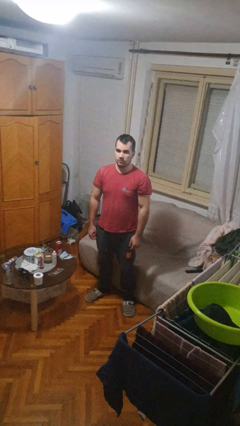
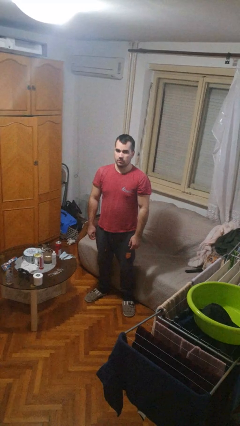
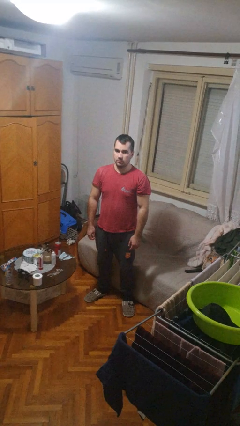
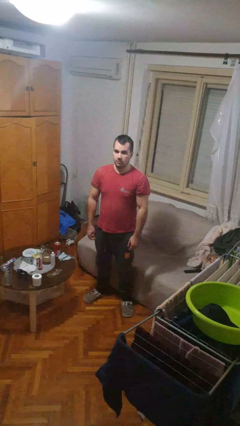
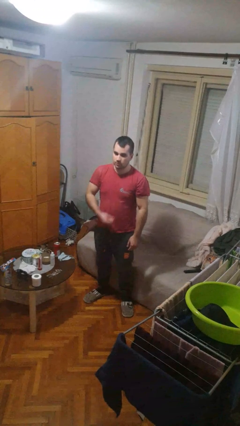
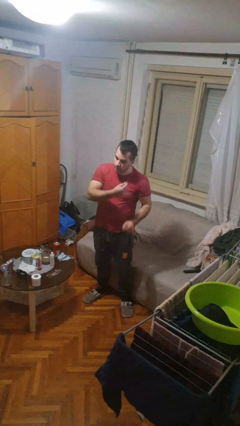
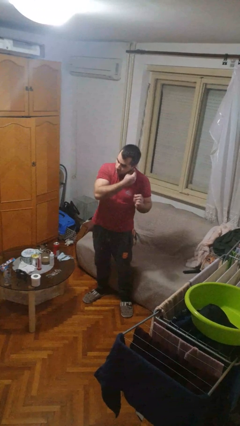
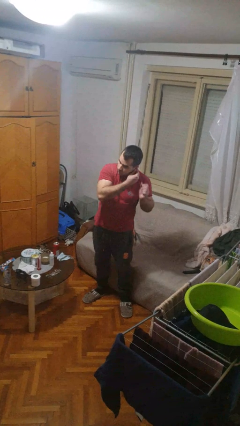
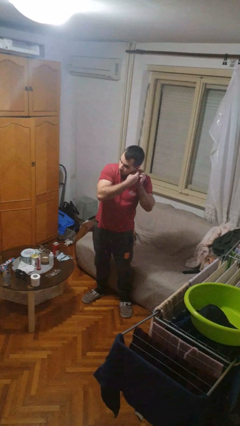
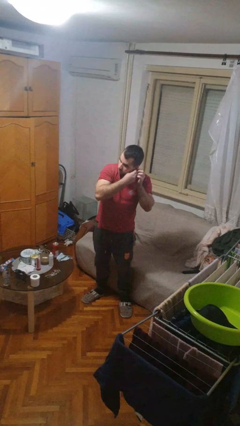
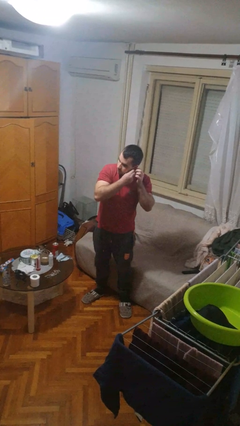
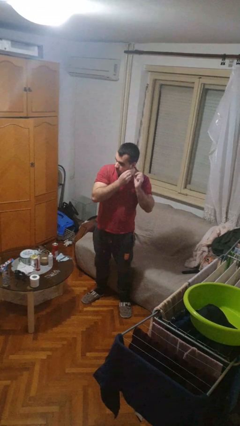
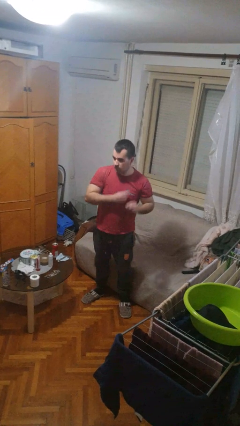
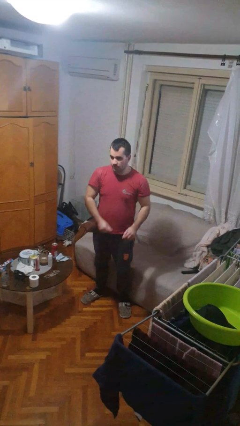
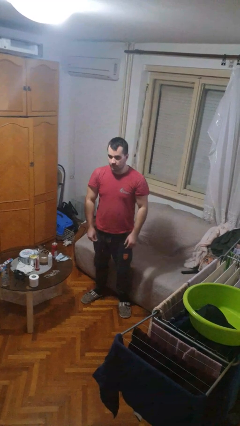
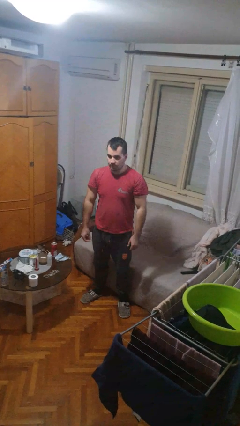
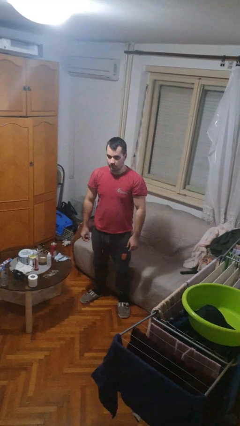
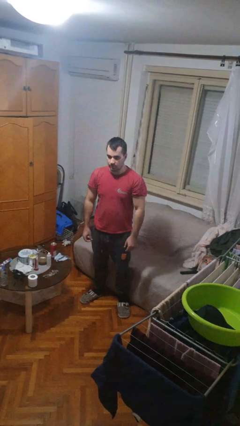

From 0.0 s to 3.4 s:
person puts on earrings

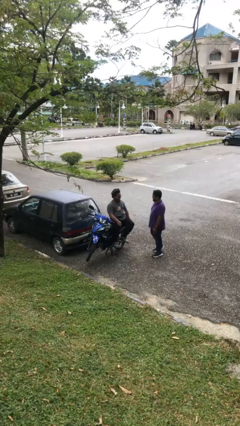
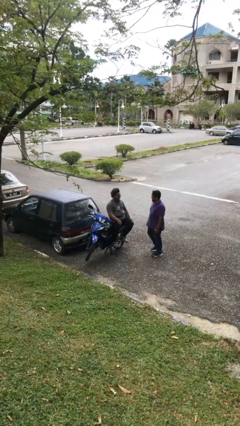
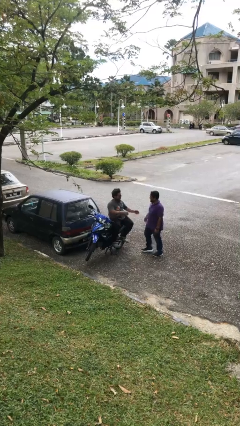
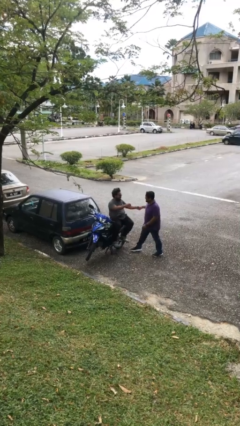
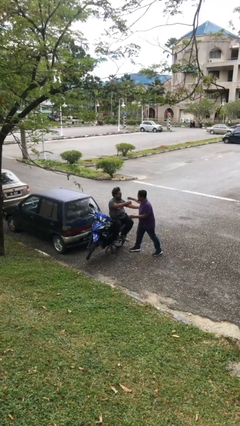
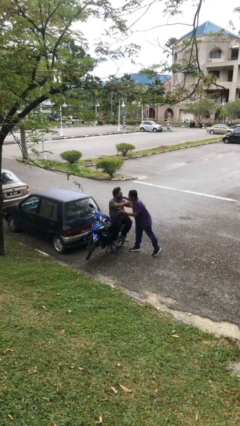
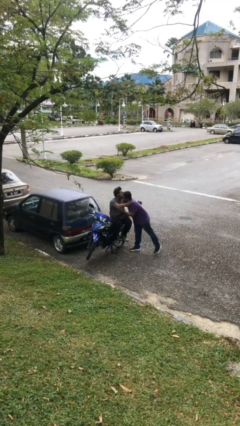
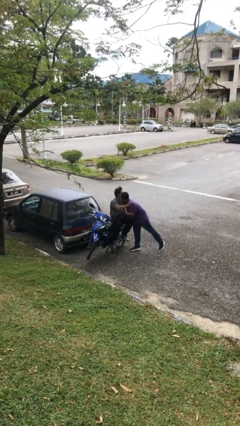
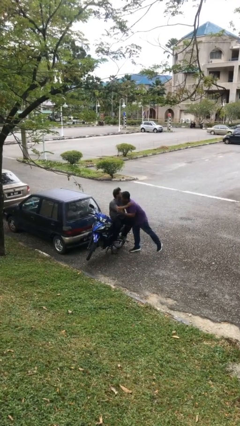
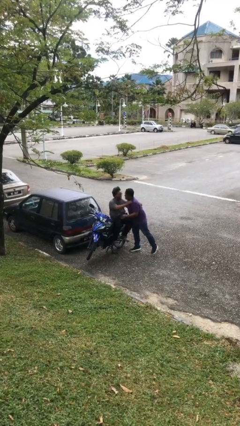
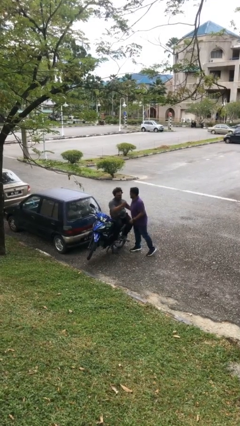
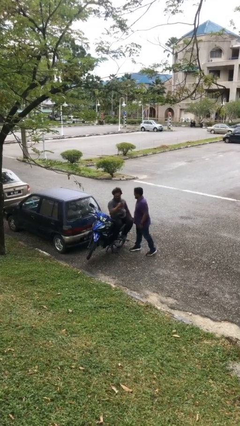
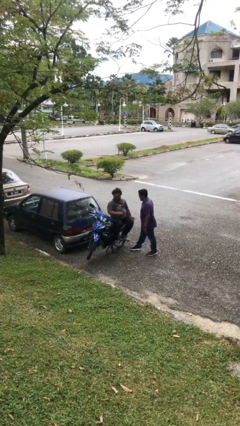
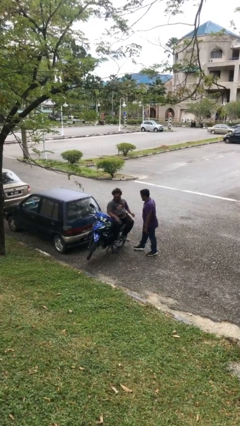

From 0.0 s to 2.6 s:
person embraces person

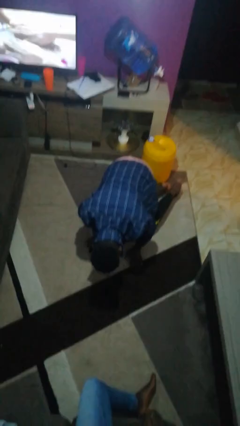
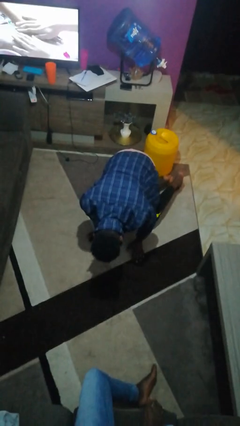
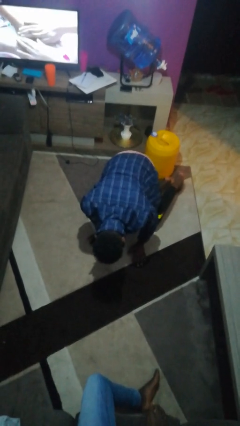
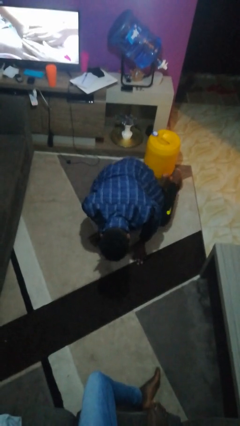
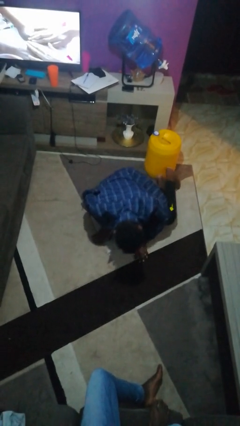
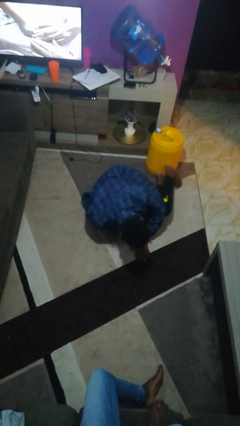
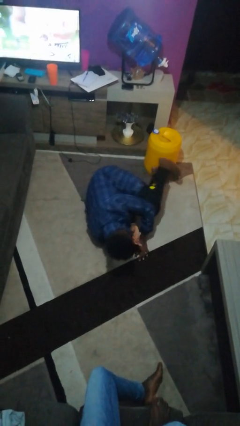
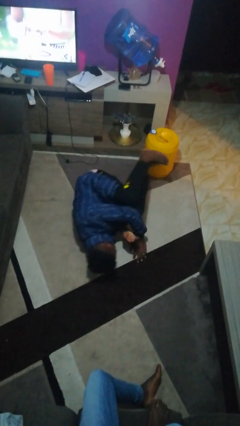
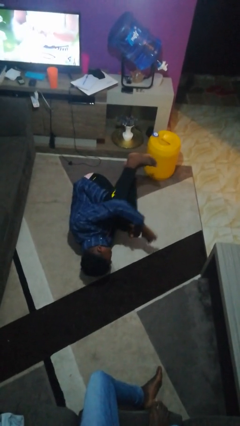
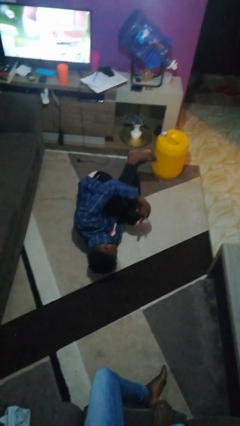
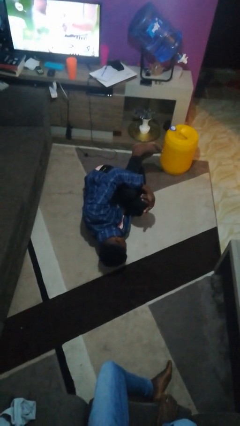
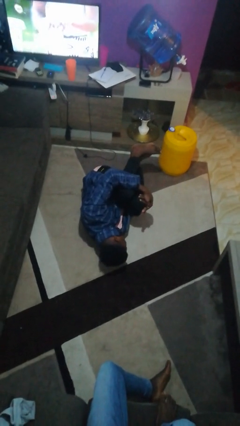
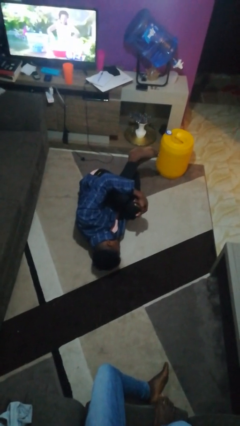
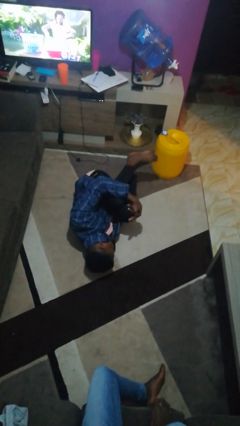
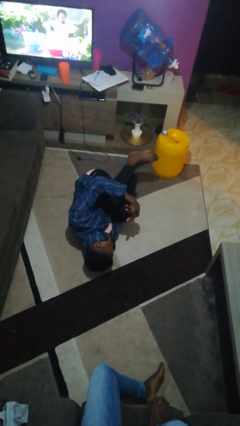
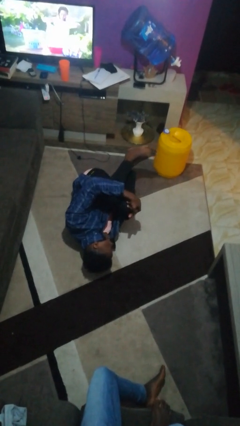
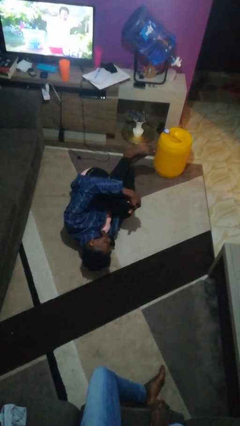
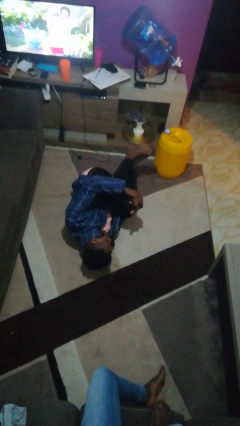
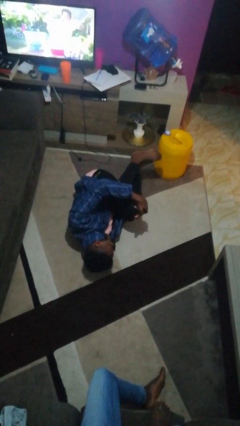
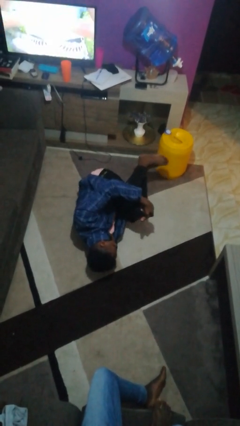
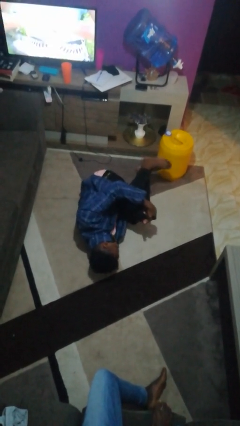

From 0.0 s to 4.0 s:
person lies down on floor

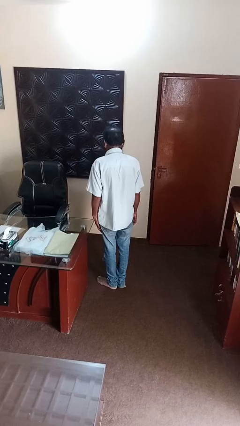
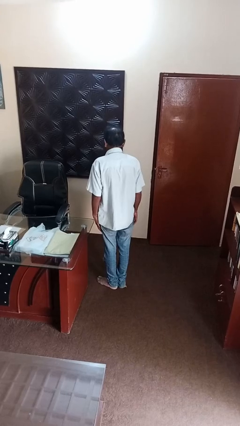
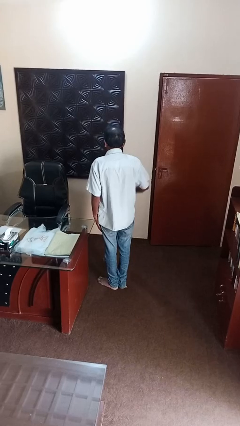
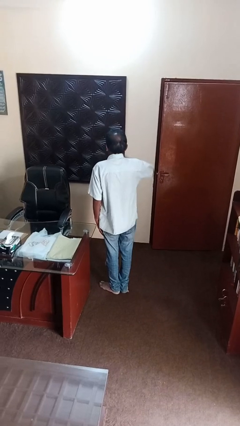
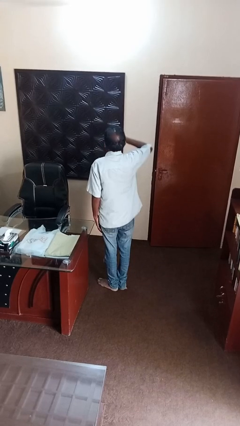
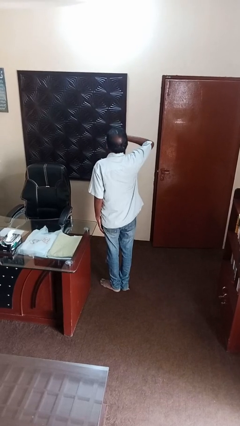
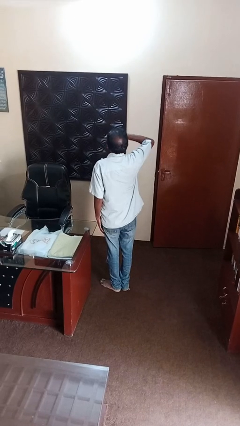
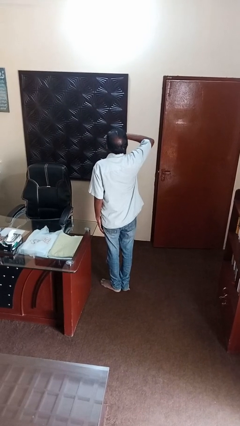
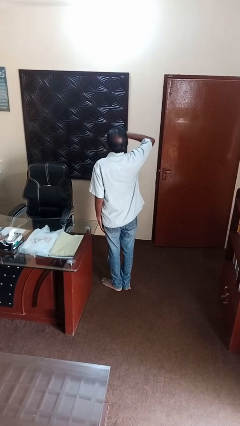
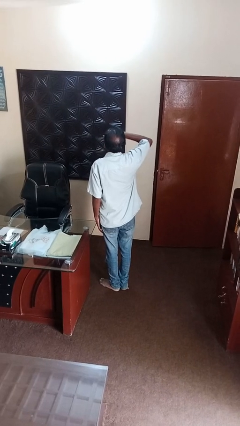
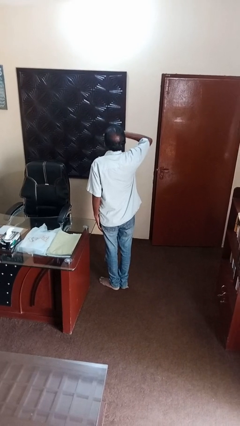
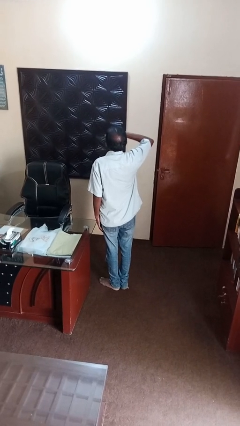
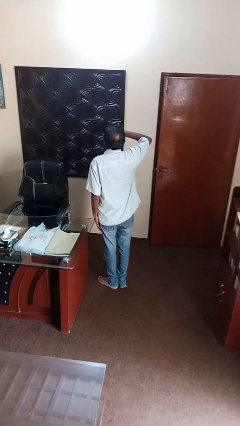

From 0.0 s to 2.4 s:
person yawns

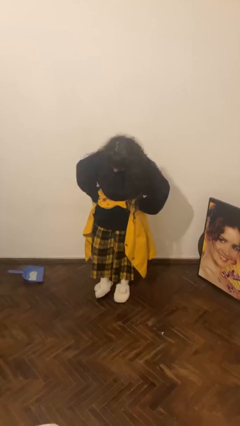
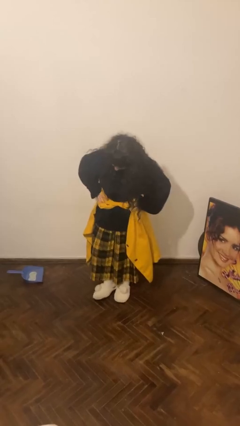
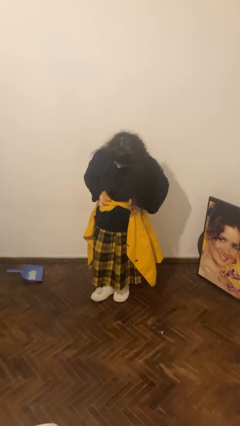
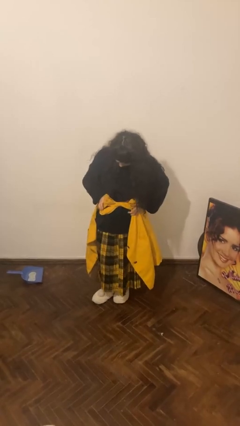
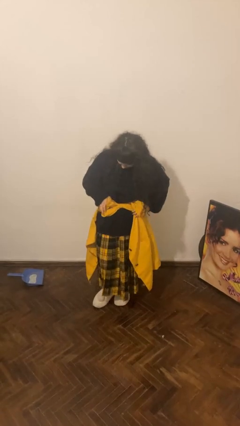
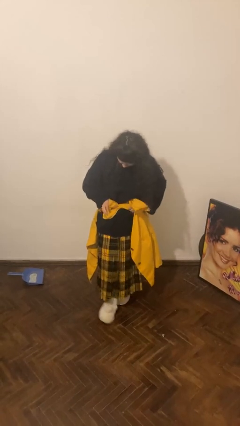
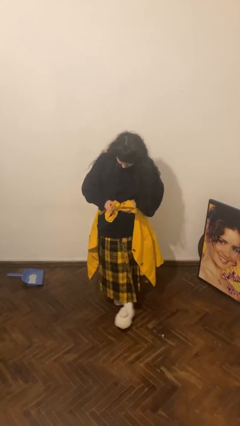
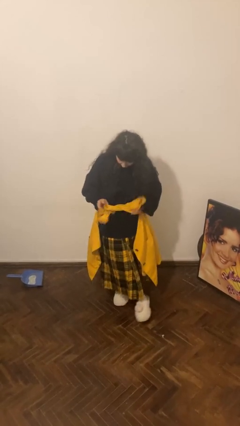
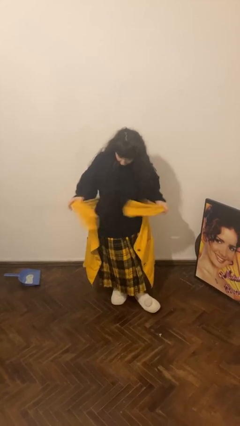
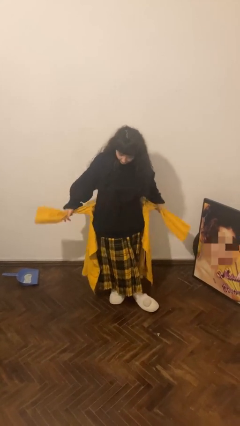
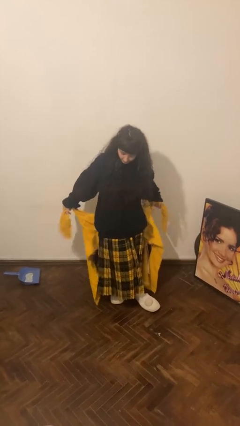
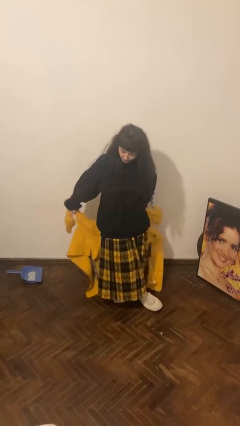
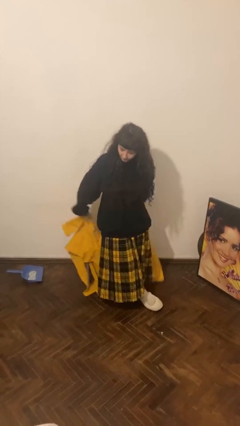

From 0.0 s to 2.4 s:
person unties jacket around waist

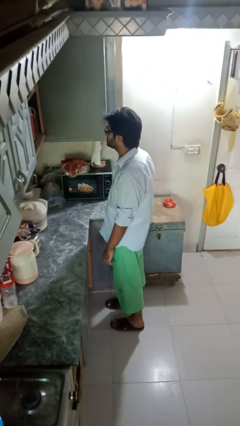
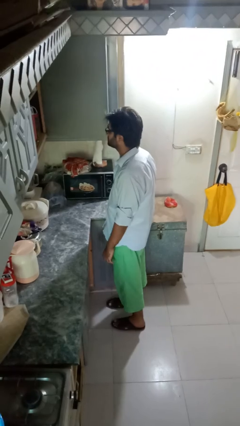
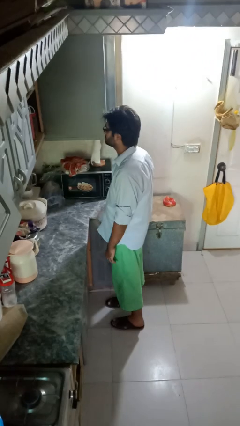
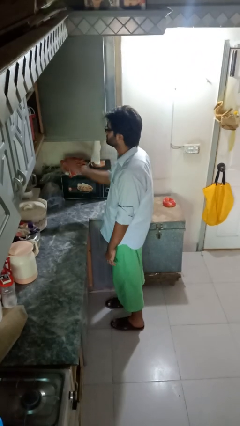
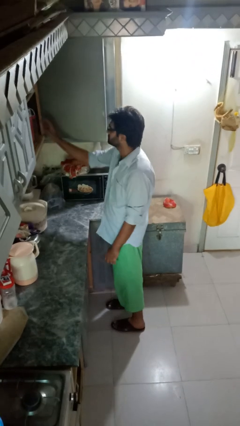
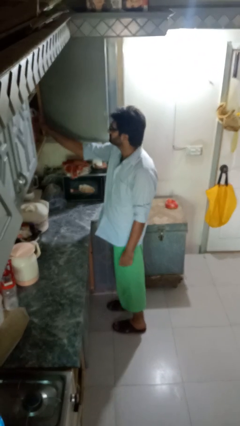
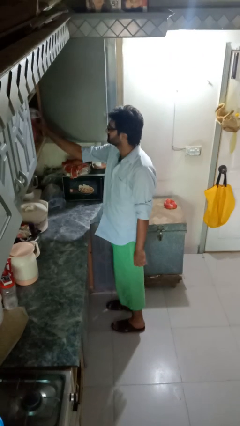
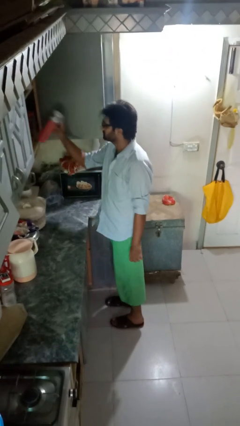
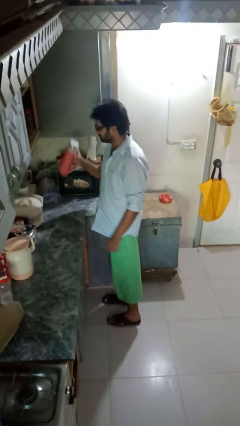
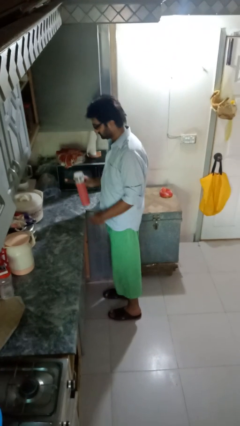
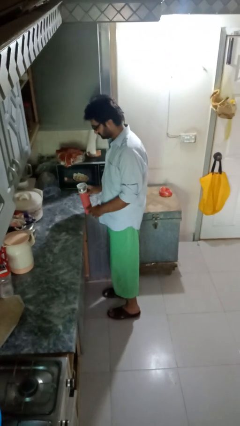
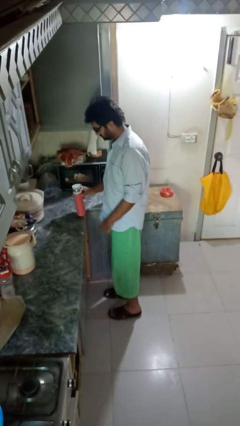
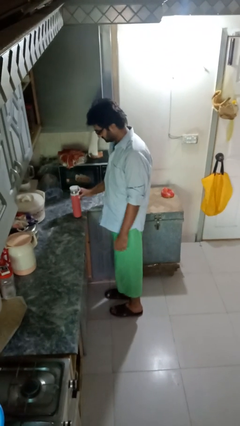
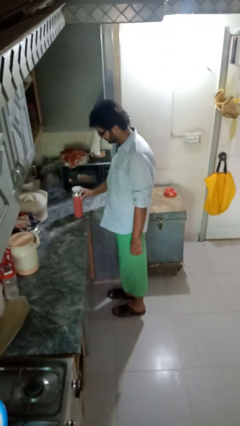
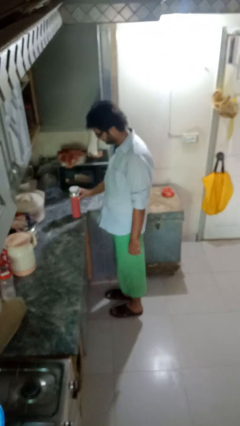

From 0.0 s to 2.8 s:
person picks up object from cabinet

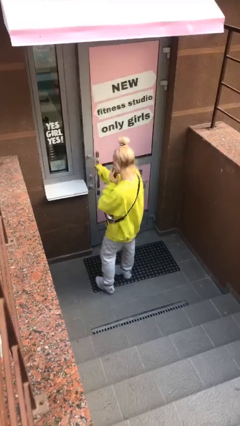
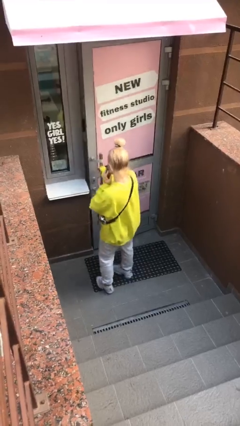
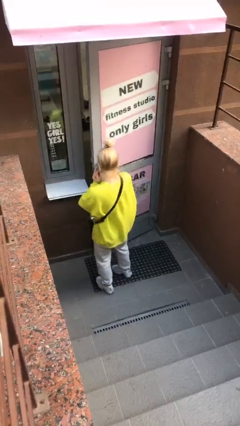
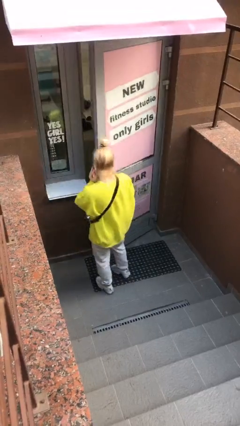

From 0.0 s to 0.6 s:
person opens facility door
